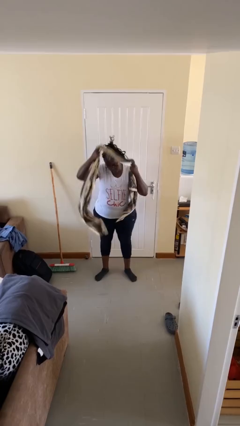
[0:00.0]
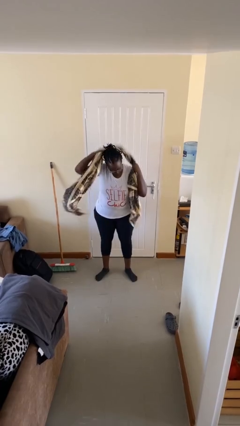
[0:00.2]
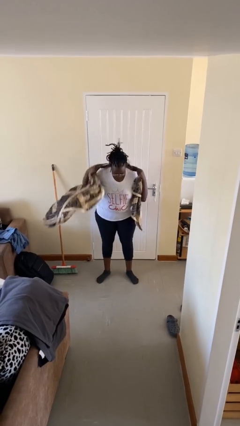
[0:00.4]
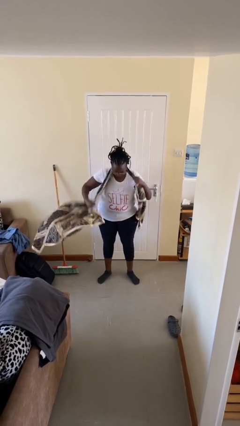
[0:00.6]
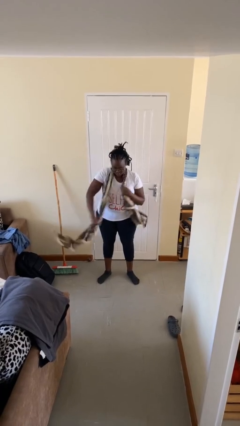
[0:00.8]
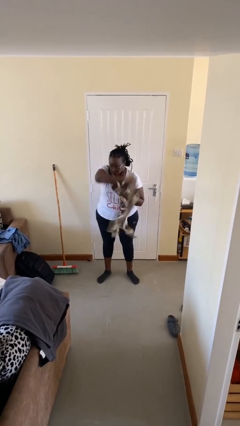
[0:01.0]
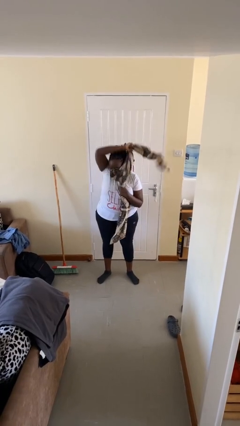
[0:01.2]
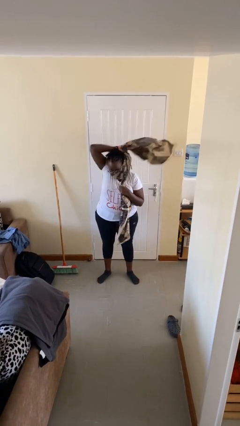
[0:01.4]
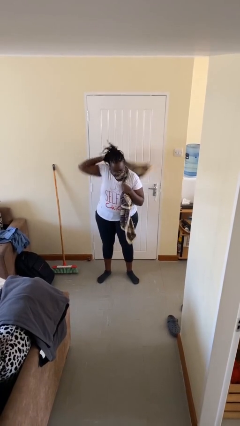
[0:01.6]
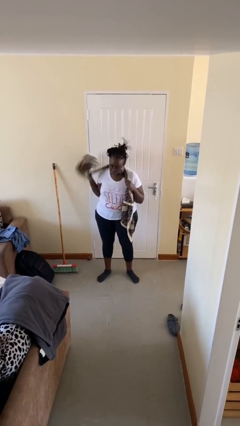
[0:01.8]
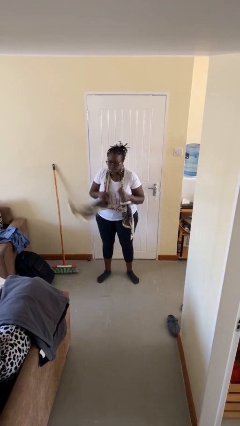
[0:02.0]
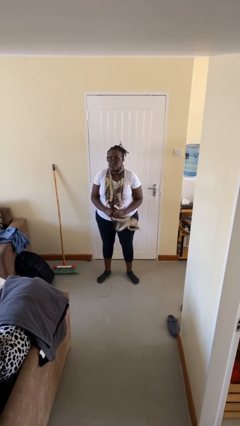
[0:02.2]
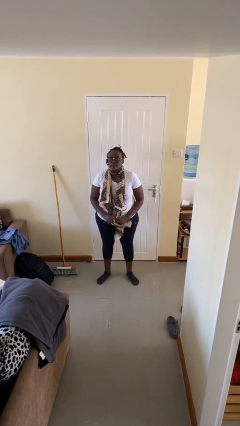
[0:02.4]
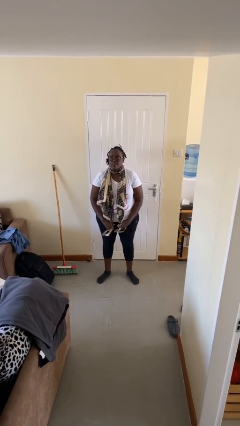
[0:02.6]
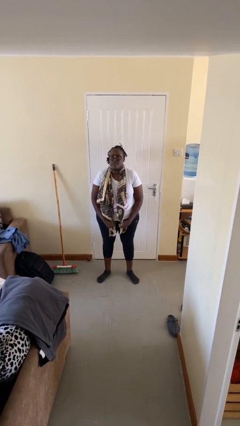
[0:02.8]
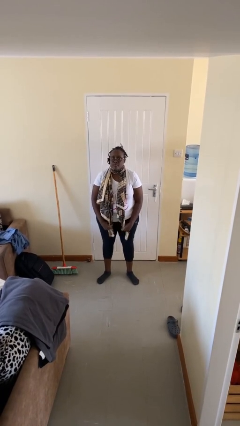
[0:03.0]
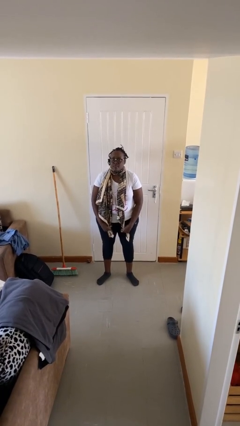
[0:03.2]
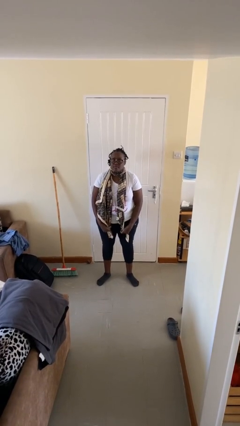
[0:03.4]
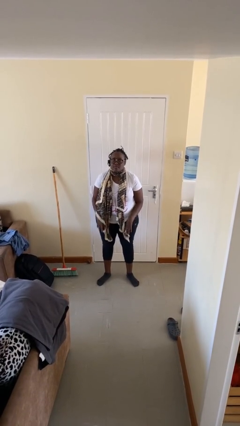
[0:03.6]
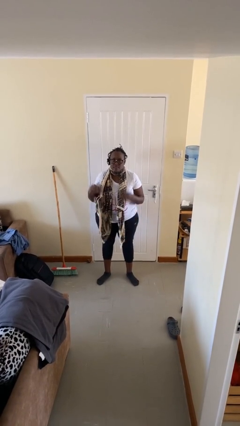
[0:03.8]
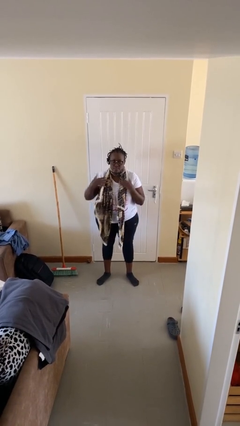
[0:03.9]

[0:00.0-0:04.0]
person puts on scarf

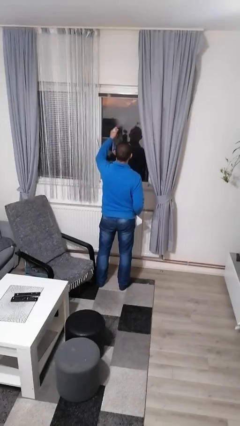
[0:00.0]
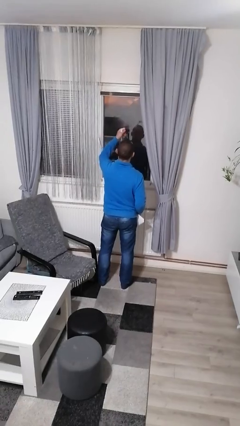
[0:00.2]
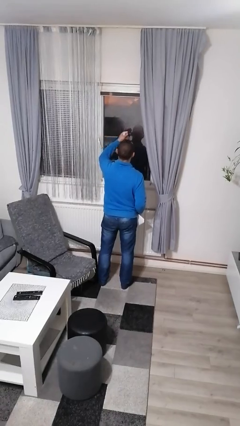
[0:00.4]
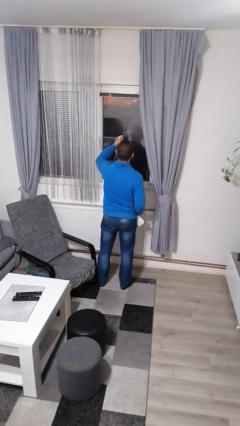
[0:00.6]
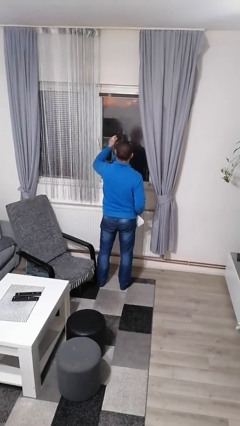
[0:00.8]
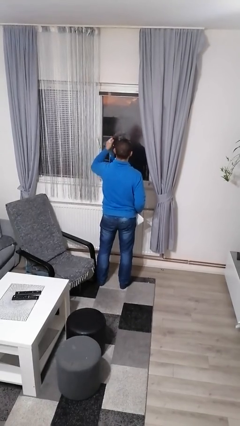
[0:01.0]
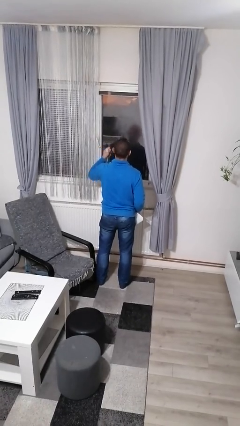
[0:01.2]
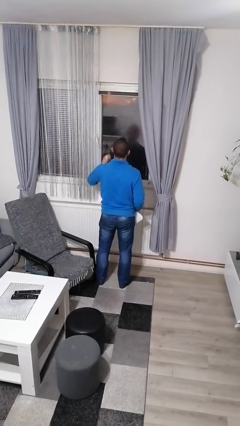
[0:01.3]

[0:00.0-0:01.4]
person sprays from bottle

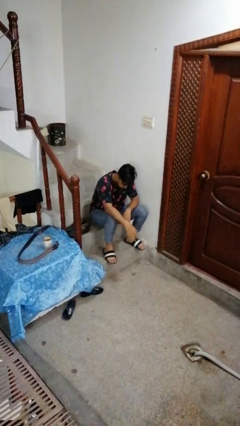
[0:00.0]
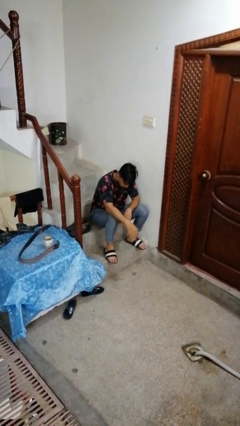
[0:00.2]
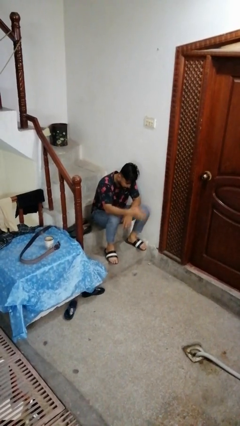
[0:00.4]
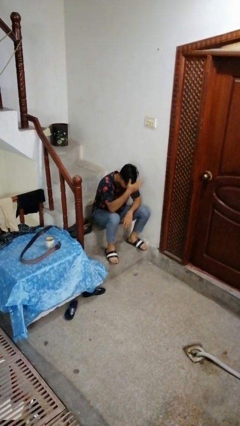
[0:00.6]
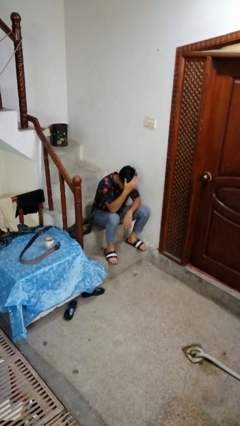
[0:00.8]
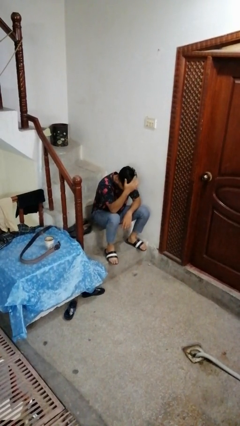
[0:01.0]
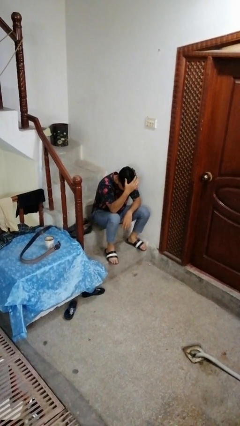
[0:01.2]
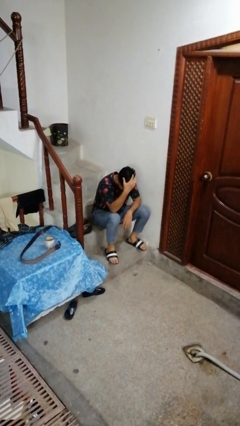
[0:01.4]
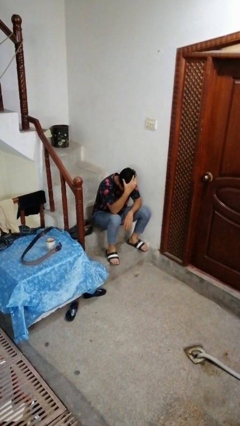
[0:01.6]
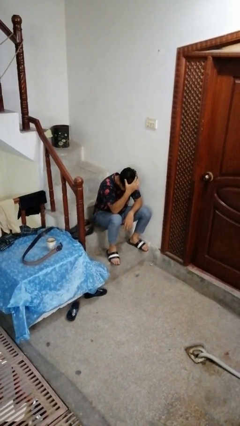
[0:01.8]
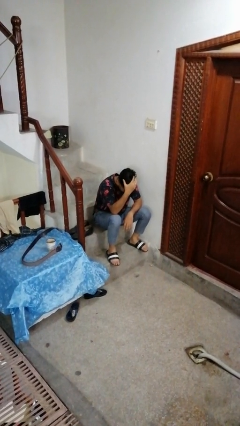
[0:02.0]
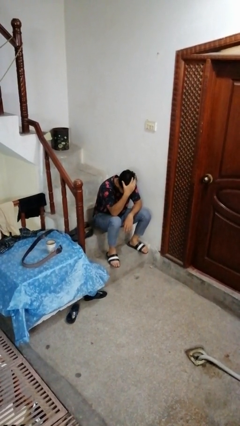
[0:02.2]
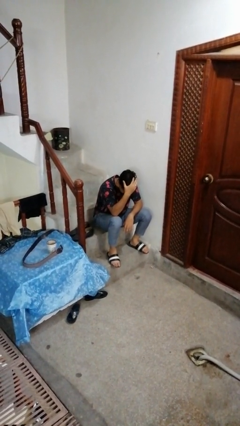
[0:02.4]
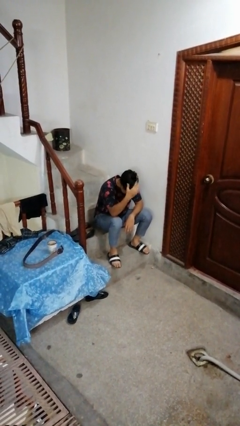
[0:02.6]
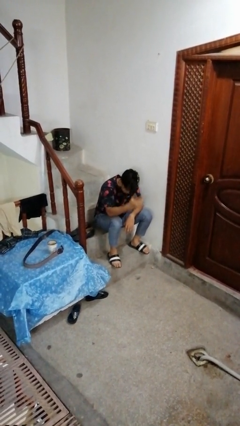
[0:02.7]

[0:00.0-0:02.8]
person strokes hair

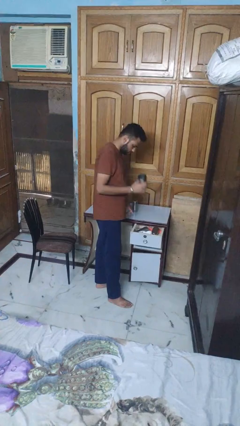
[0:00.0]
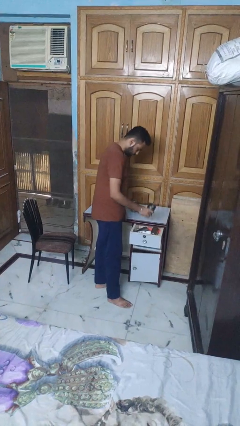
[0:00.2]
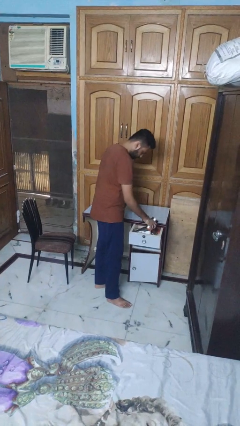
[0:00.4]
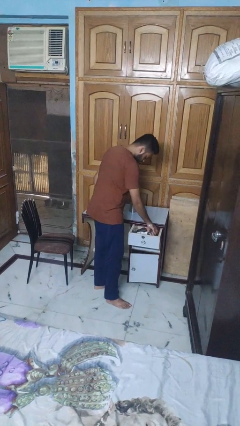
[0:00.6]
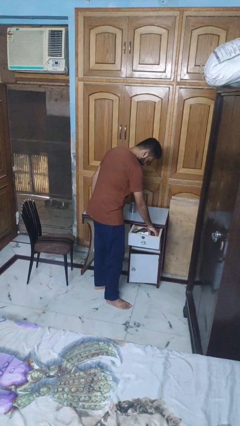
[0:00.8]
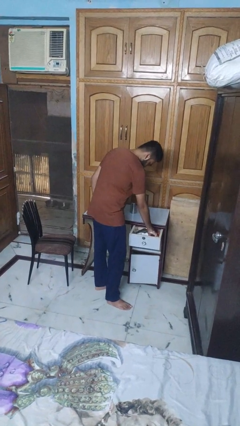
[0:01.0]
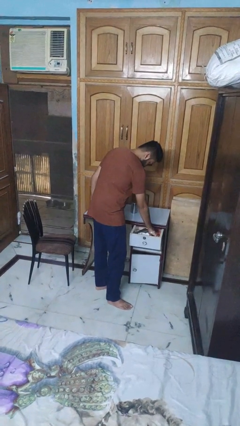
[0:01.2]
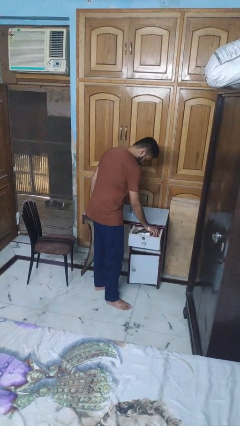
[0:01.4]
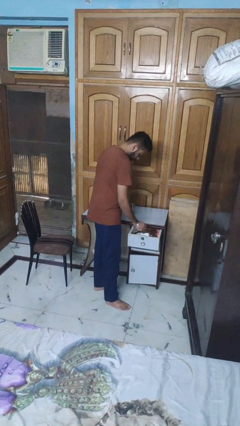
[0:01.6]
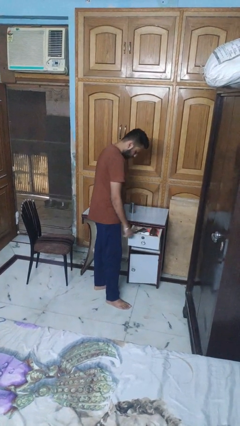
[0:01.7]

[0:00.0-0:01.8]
person puts object into kitchen drawer

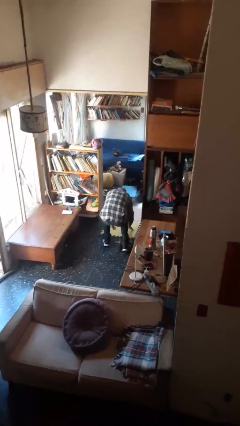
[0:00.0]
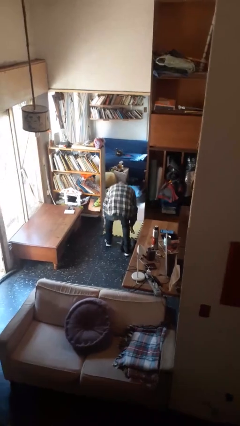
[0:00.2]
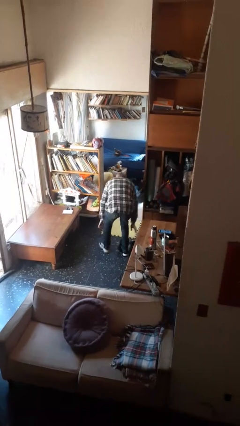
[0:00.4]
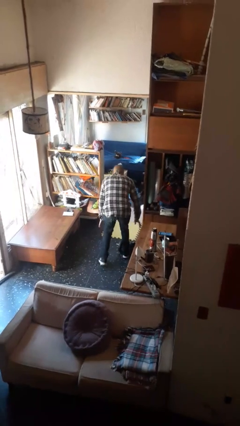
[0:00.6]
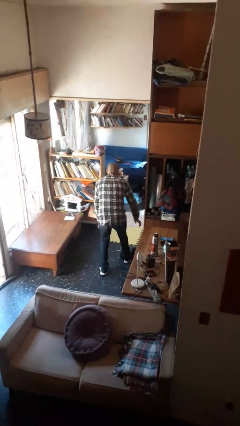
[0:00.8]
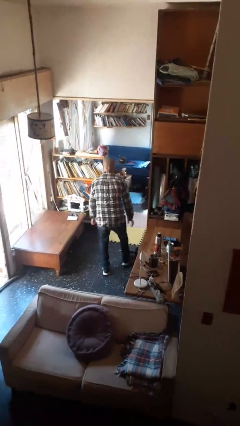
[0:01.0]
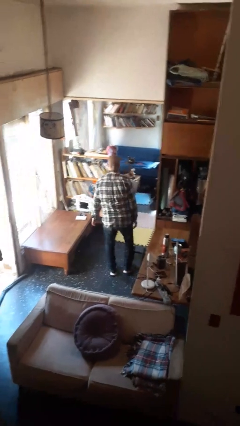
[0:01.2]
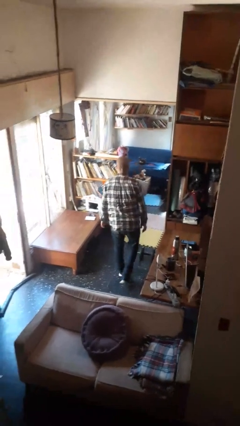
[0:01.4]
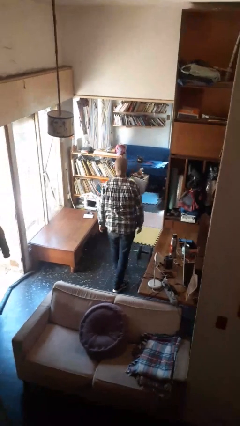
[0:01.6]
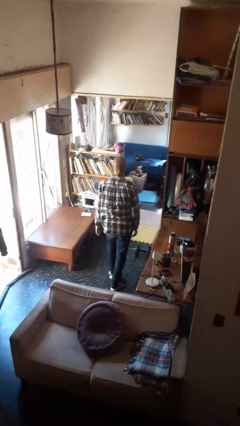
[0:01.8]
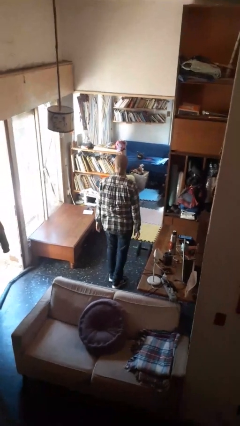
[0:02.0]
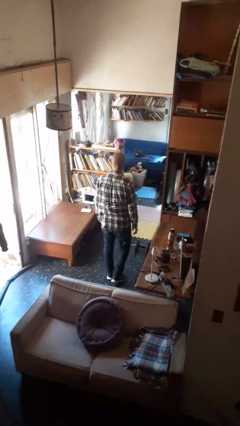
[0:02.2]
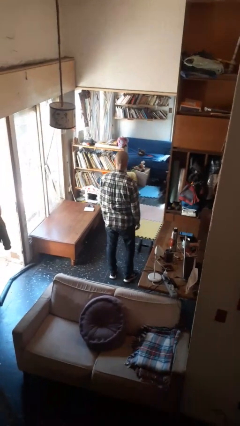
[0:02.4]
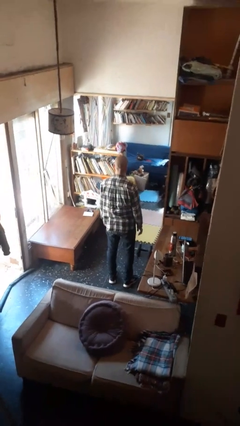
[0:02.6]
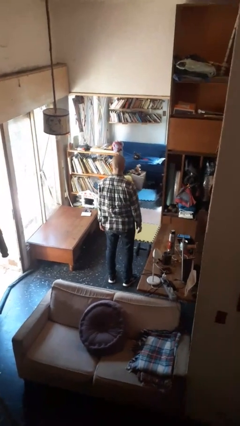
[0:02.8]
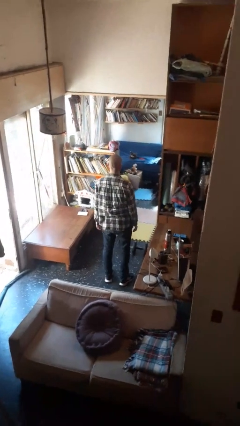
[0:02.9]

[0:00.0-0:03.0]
person stands up from floor

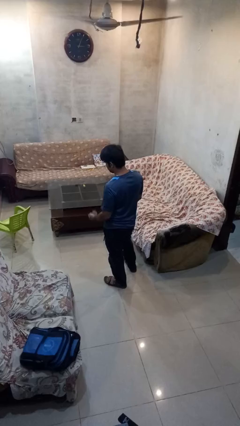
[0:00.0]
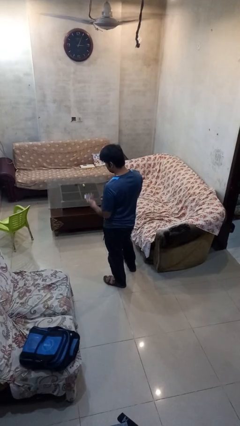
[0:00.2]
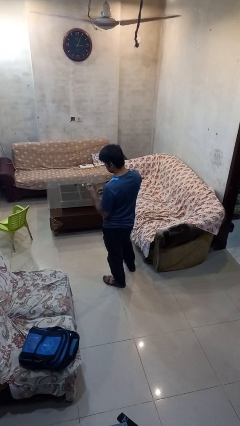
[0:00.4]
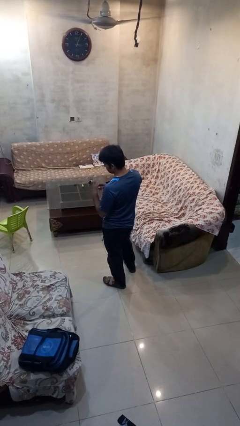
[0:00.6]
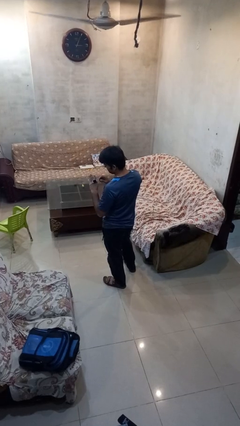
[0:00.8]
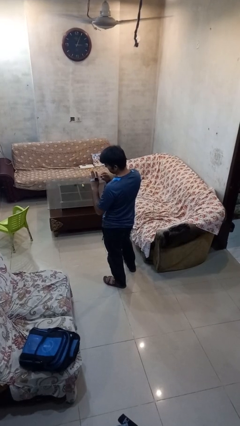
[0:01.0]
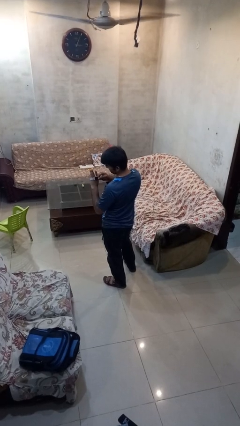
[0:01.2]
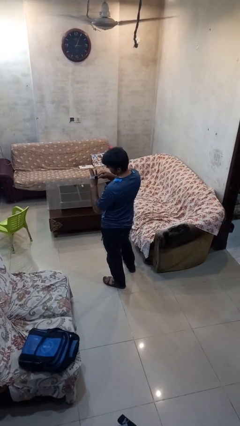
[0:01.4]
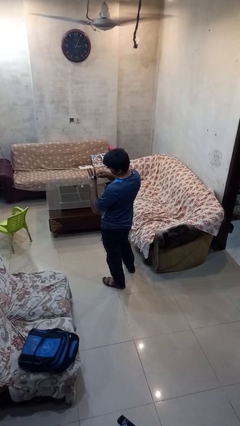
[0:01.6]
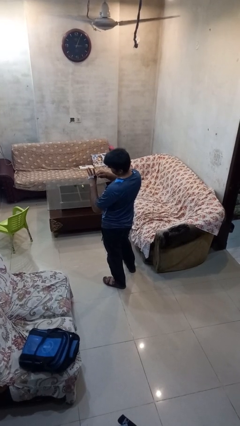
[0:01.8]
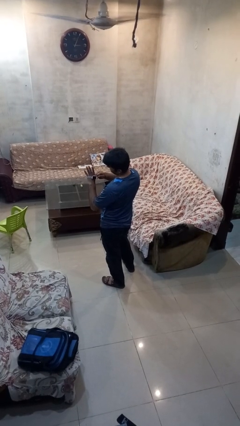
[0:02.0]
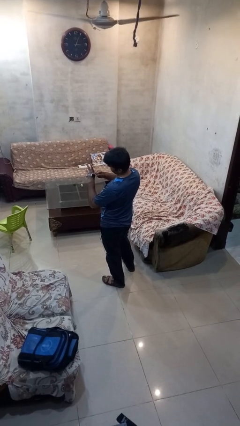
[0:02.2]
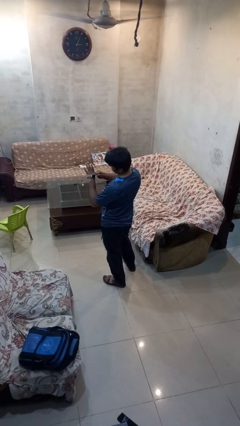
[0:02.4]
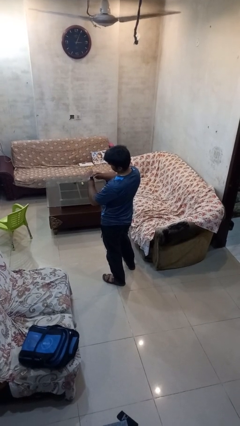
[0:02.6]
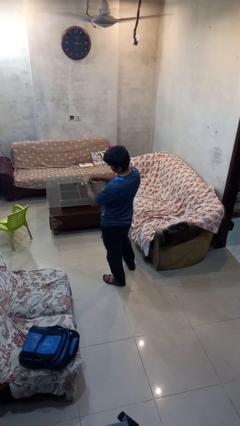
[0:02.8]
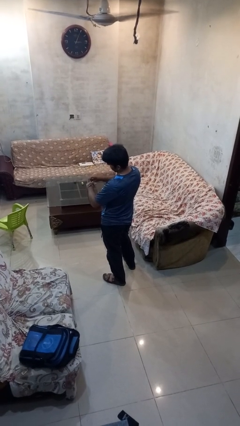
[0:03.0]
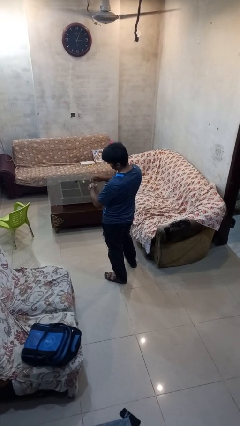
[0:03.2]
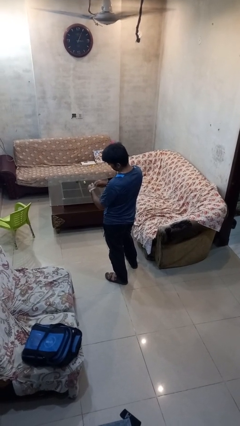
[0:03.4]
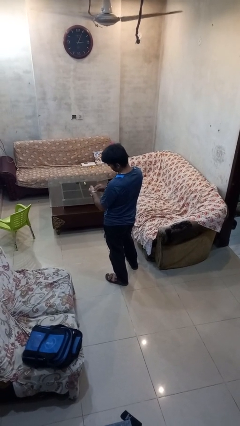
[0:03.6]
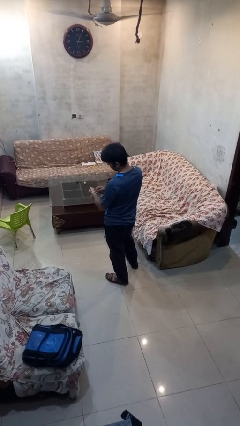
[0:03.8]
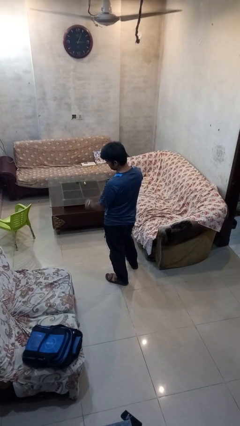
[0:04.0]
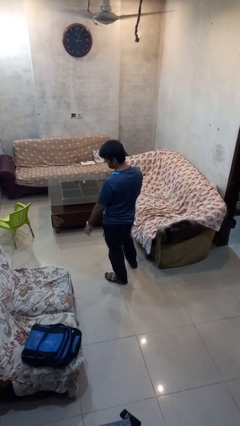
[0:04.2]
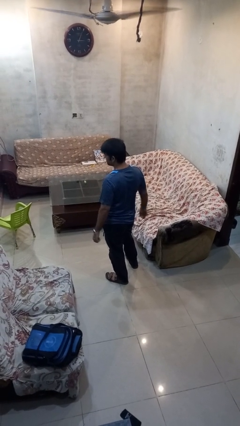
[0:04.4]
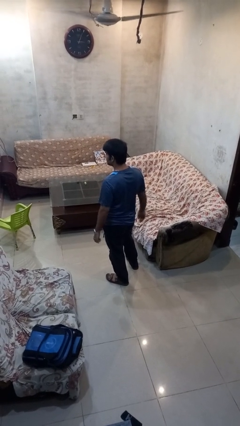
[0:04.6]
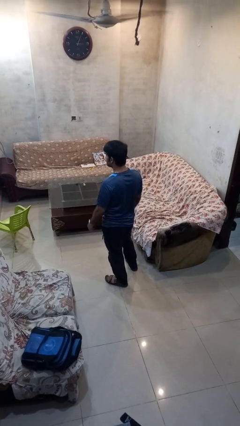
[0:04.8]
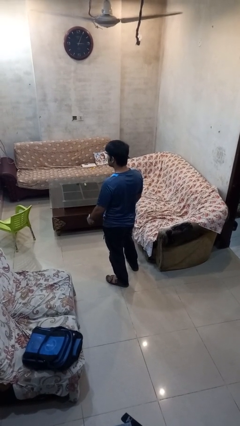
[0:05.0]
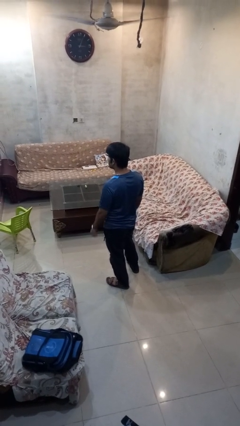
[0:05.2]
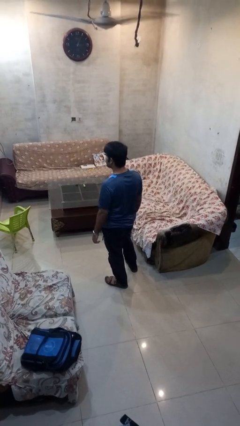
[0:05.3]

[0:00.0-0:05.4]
person puts on wristwatch
